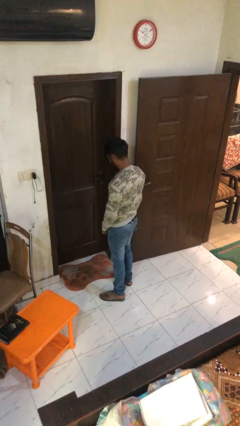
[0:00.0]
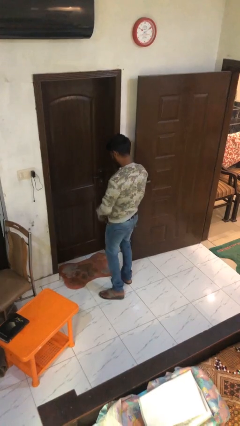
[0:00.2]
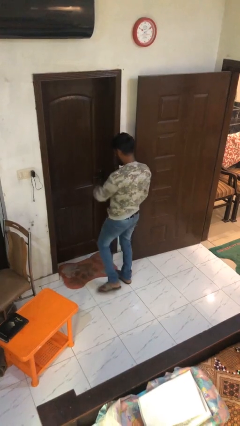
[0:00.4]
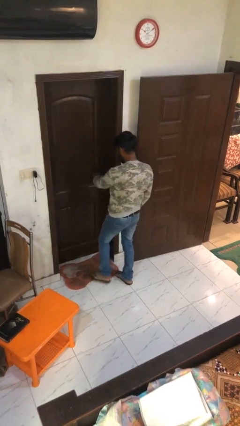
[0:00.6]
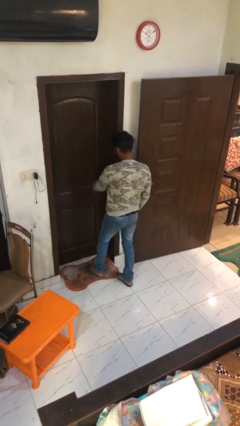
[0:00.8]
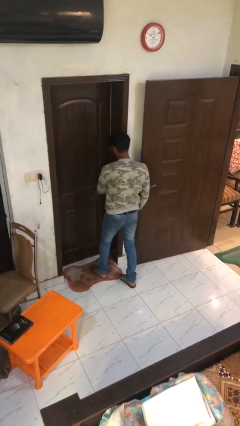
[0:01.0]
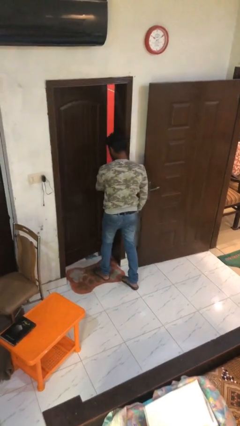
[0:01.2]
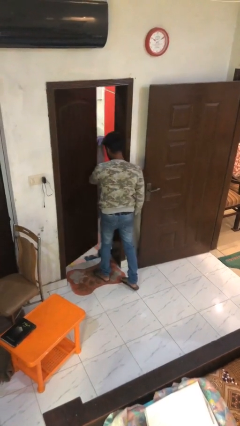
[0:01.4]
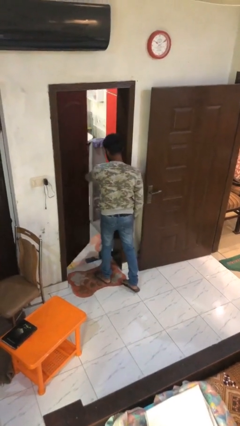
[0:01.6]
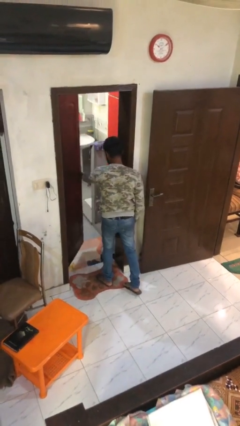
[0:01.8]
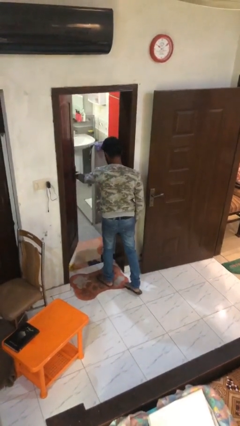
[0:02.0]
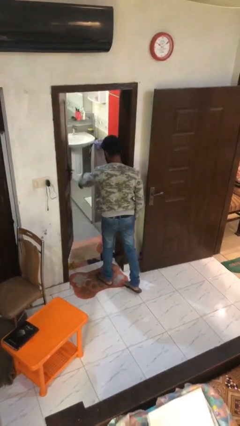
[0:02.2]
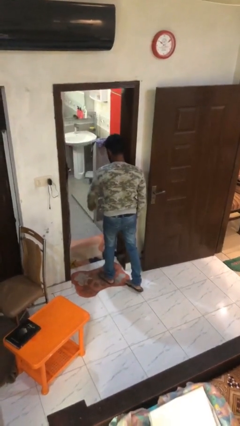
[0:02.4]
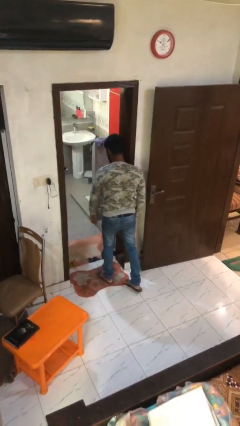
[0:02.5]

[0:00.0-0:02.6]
person opens facility door

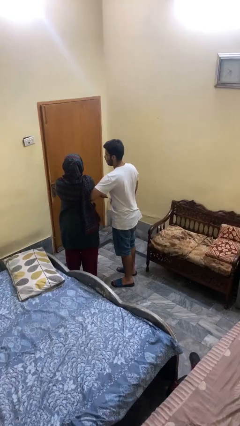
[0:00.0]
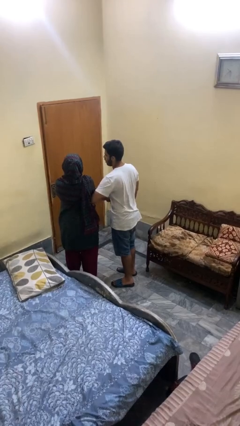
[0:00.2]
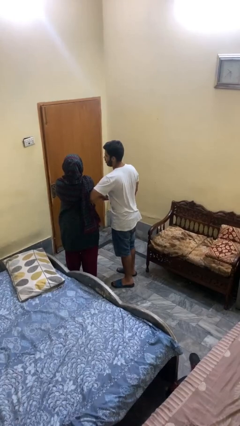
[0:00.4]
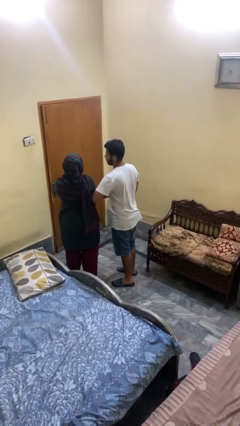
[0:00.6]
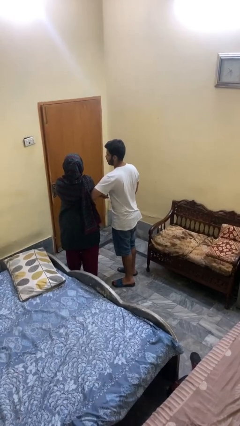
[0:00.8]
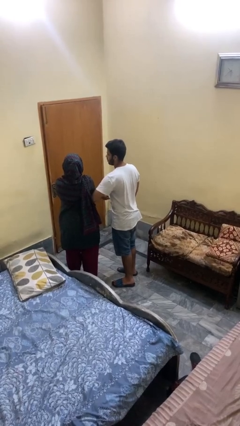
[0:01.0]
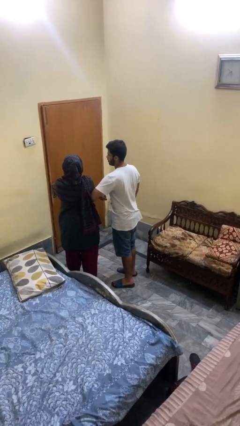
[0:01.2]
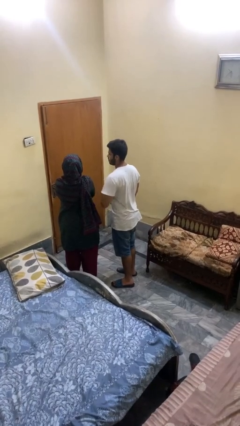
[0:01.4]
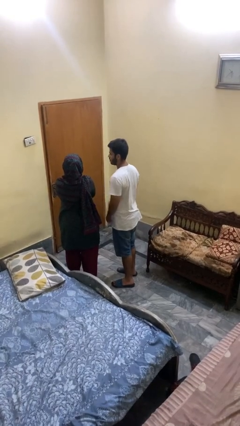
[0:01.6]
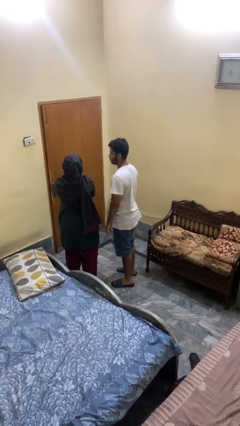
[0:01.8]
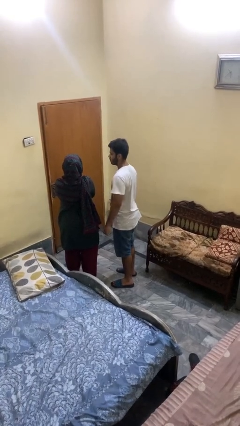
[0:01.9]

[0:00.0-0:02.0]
person nudges person with elbow

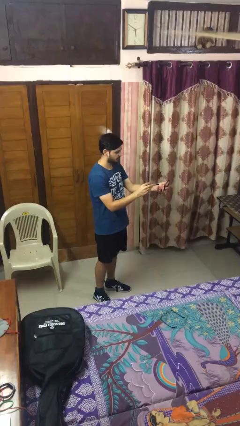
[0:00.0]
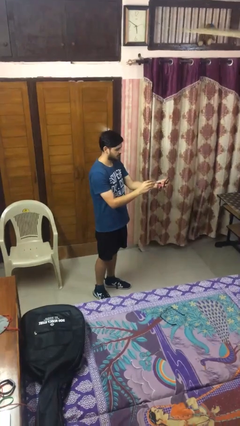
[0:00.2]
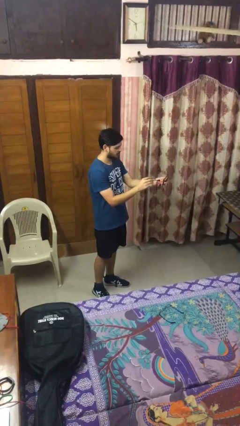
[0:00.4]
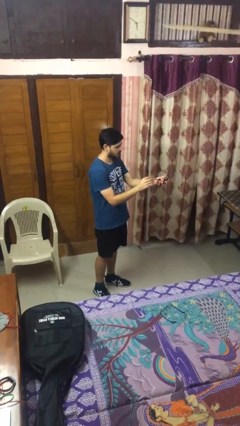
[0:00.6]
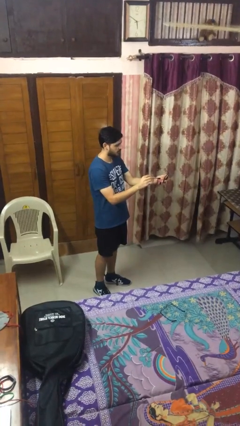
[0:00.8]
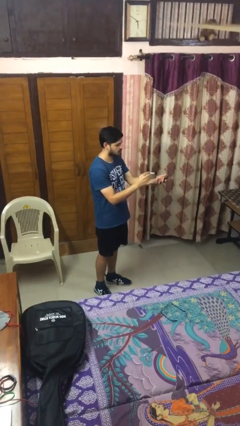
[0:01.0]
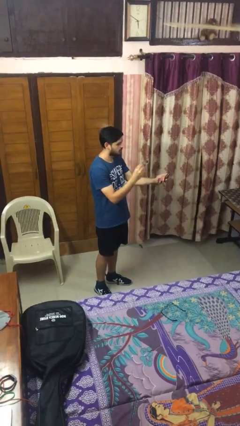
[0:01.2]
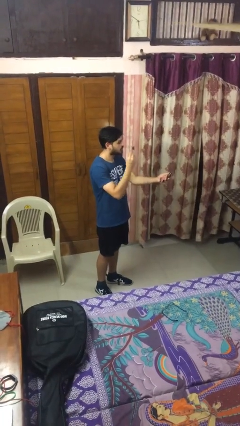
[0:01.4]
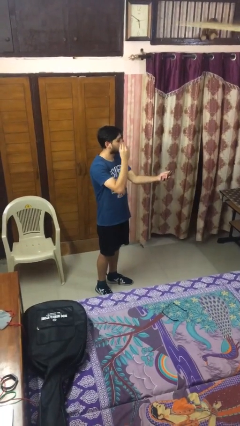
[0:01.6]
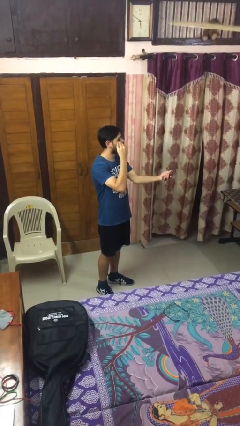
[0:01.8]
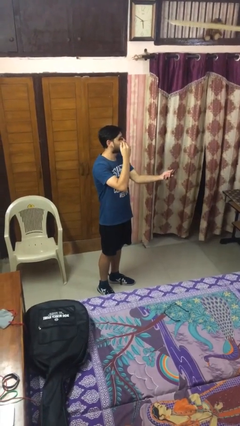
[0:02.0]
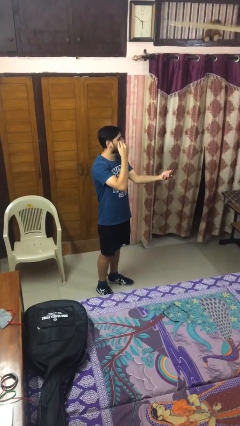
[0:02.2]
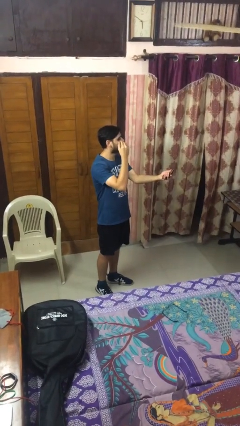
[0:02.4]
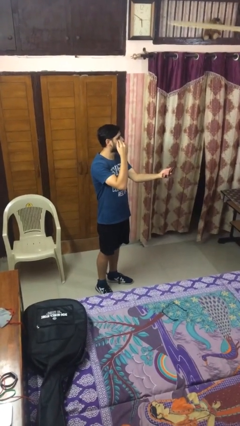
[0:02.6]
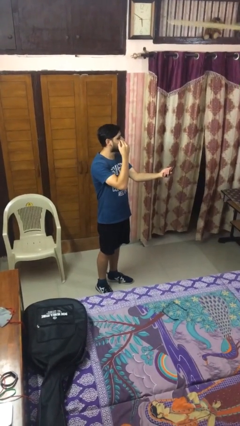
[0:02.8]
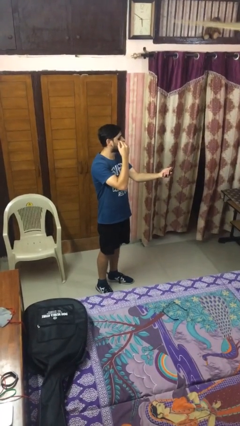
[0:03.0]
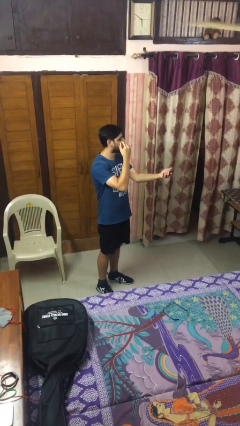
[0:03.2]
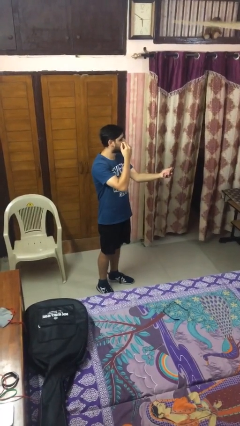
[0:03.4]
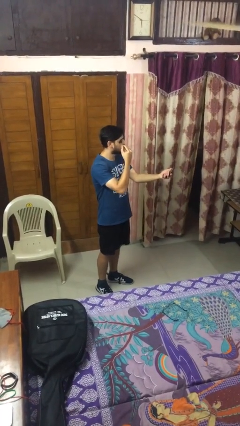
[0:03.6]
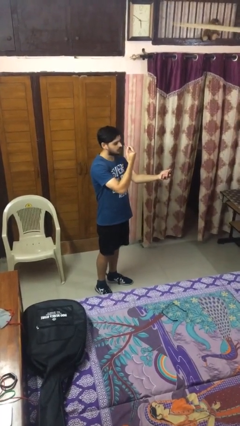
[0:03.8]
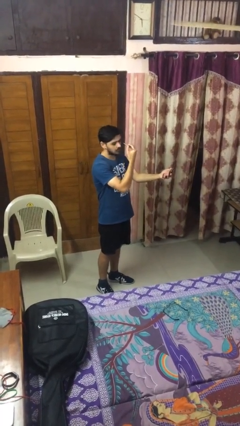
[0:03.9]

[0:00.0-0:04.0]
person applies eye makeup

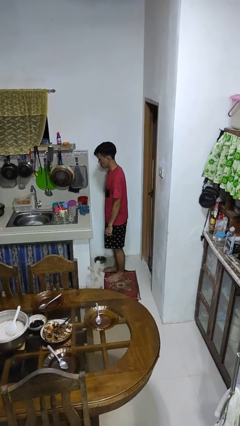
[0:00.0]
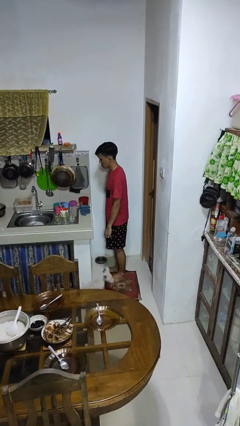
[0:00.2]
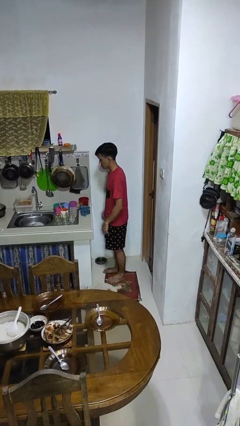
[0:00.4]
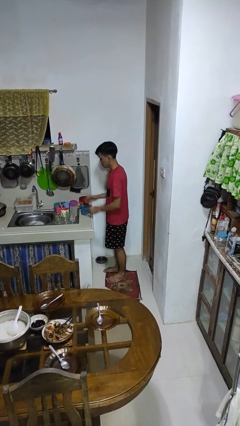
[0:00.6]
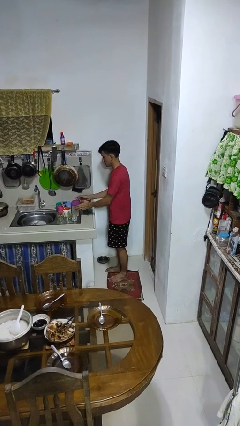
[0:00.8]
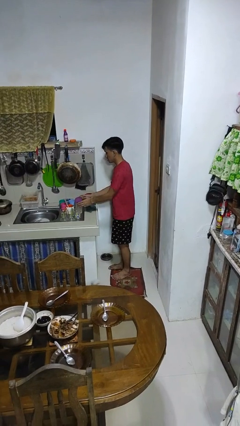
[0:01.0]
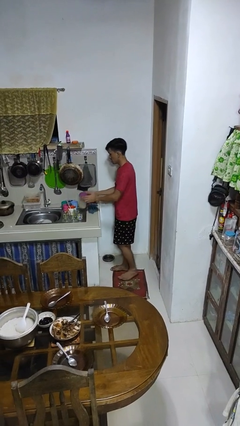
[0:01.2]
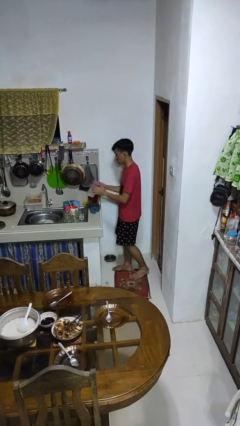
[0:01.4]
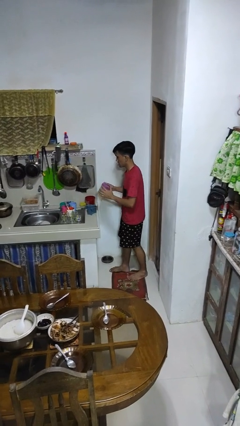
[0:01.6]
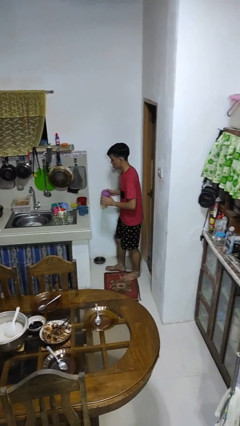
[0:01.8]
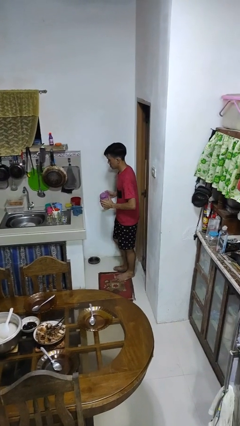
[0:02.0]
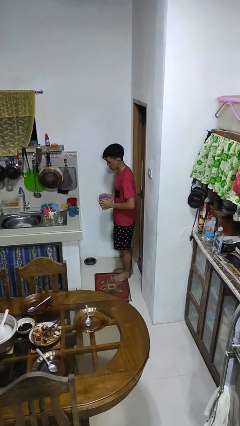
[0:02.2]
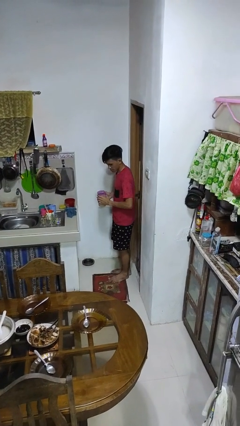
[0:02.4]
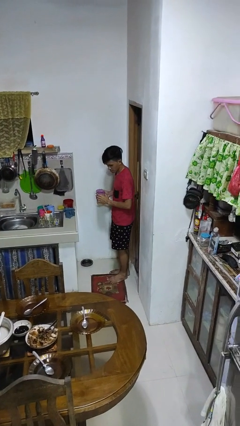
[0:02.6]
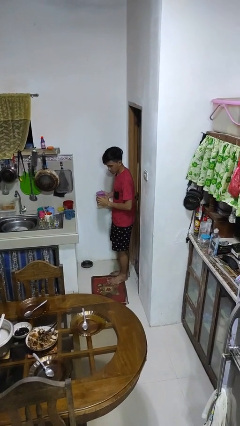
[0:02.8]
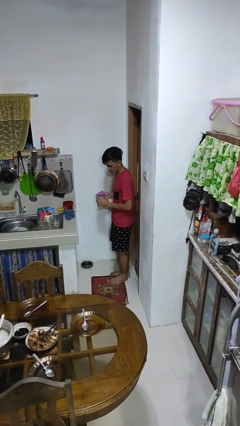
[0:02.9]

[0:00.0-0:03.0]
person picks up object from countertop

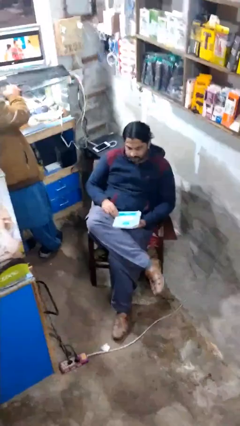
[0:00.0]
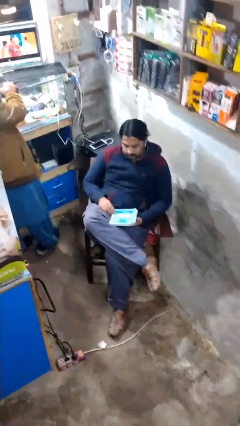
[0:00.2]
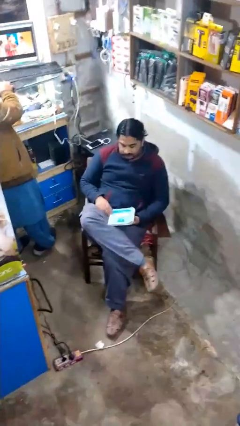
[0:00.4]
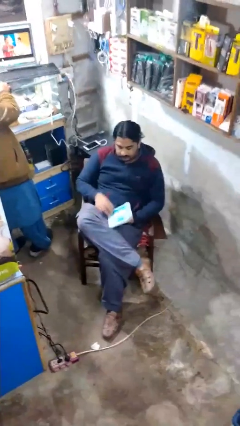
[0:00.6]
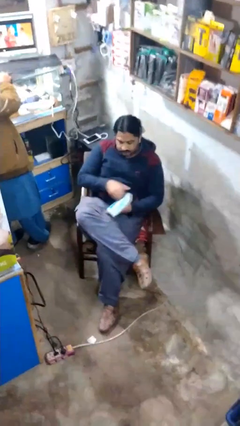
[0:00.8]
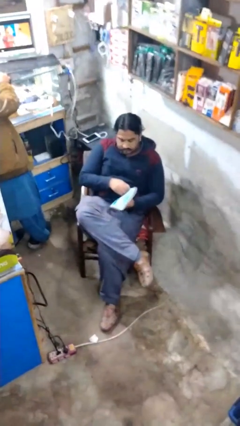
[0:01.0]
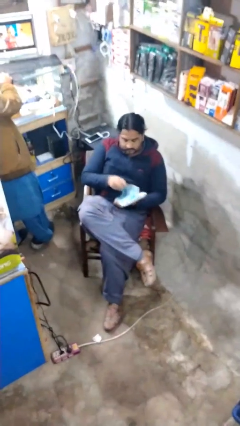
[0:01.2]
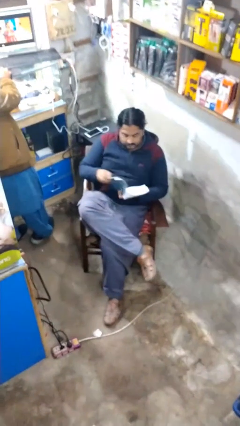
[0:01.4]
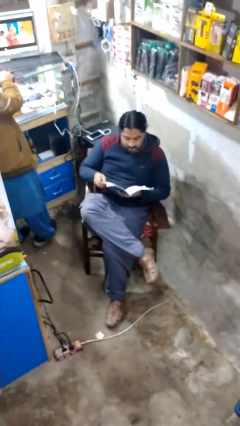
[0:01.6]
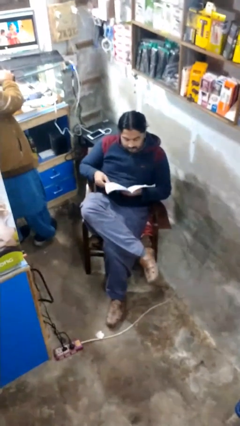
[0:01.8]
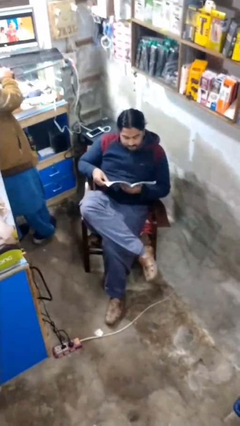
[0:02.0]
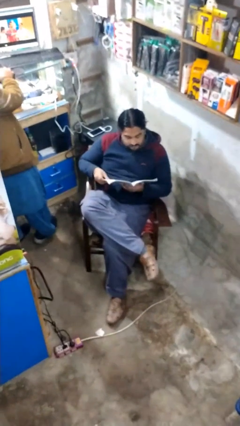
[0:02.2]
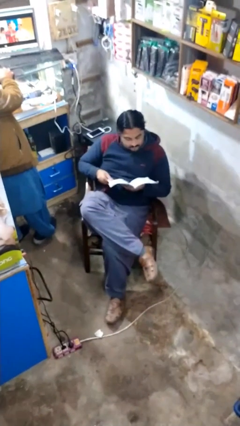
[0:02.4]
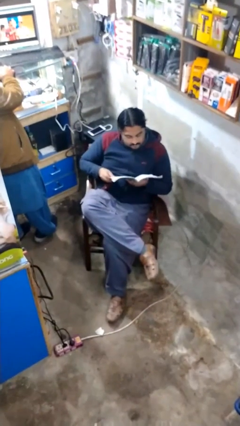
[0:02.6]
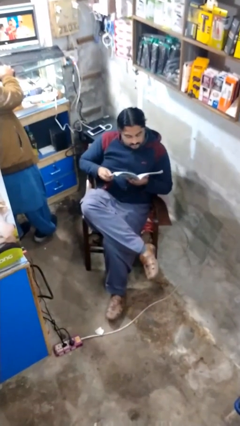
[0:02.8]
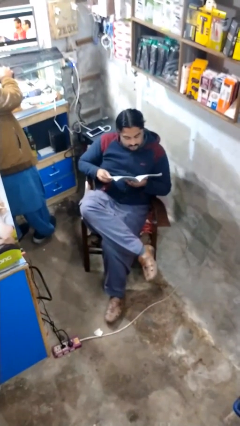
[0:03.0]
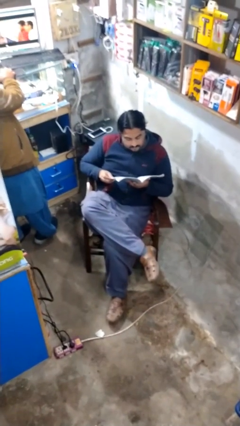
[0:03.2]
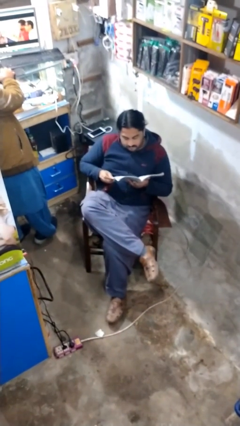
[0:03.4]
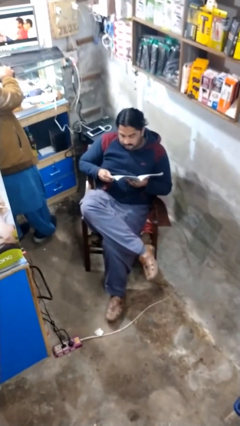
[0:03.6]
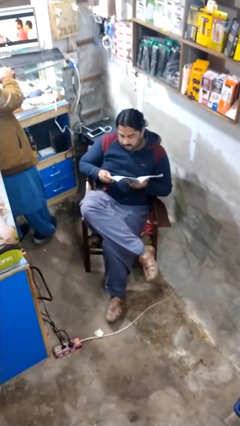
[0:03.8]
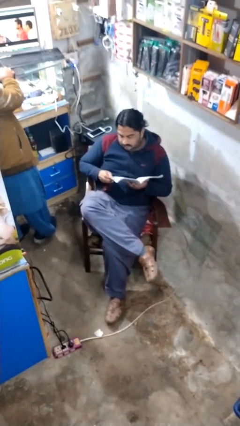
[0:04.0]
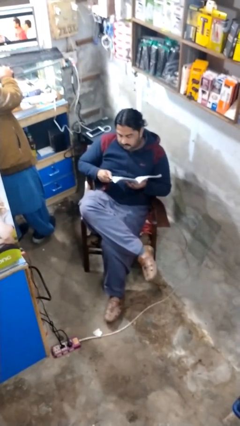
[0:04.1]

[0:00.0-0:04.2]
person reads document

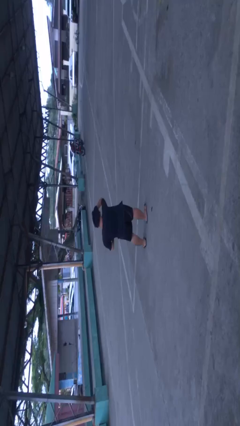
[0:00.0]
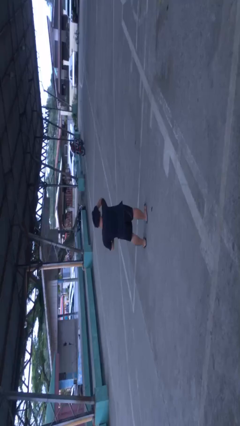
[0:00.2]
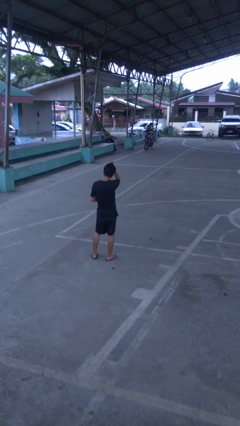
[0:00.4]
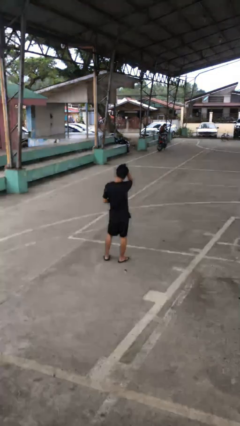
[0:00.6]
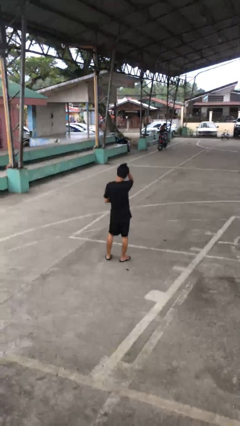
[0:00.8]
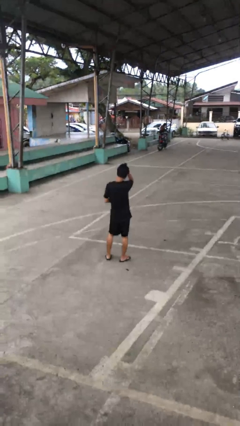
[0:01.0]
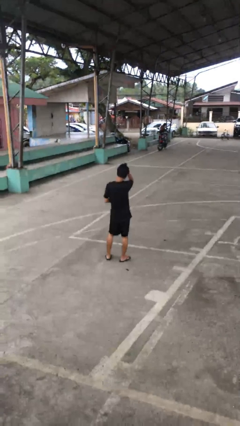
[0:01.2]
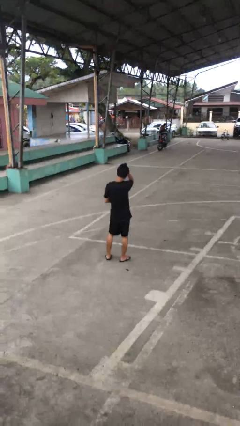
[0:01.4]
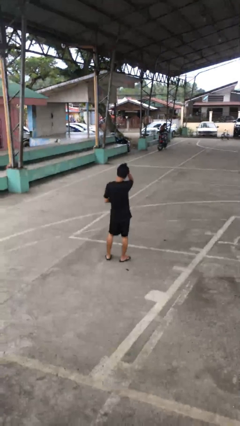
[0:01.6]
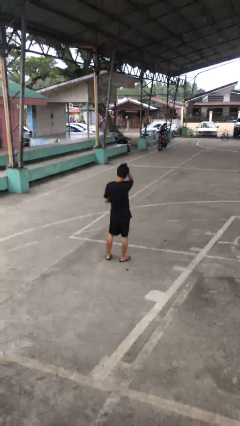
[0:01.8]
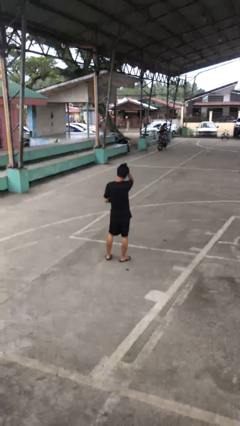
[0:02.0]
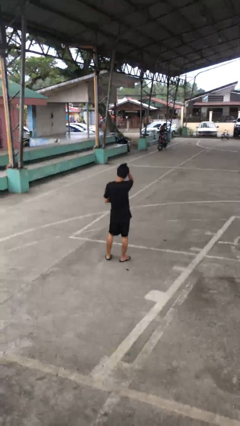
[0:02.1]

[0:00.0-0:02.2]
person gestures raise hand
